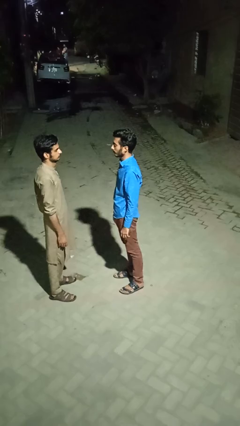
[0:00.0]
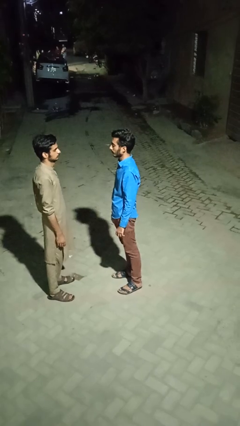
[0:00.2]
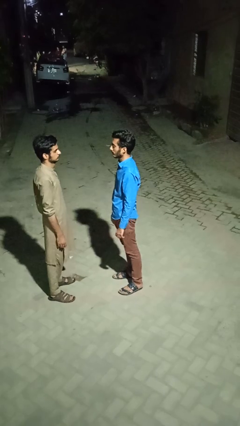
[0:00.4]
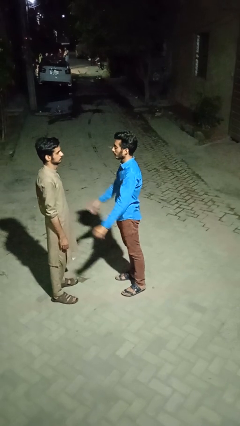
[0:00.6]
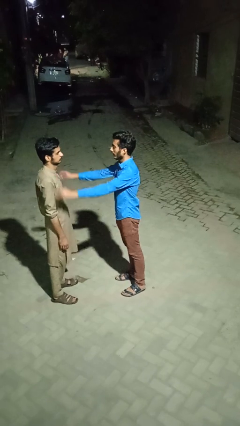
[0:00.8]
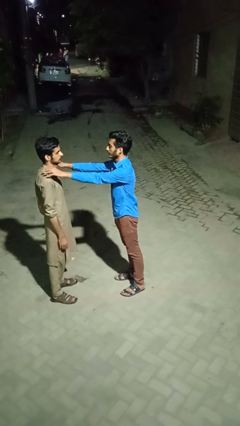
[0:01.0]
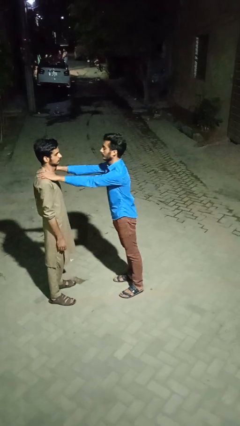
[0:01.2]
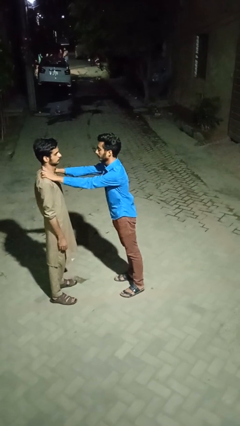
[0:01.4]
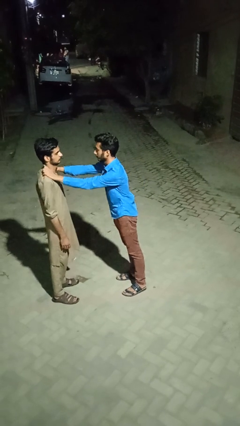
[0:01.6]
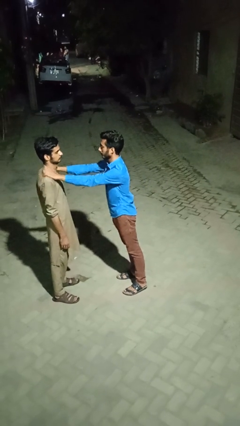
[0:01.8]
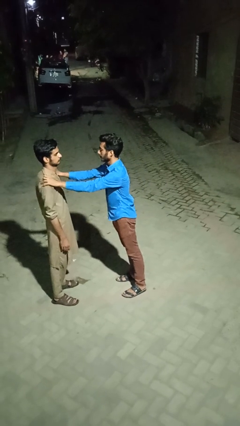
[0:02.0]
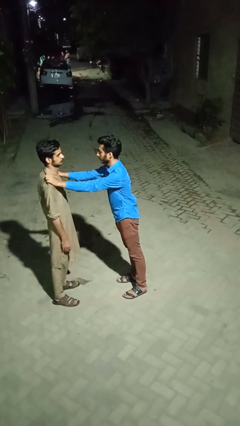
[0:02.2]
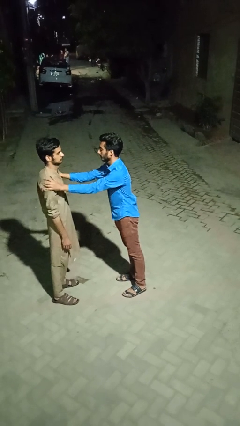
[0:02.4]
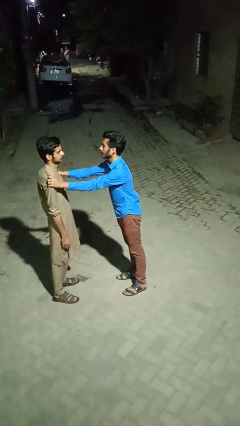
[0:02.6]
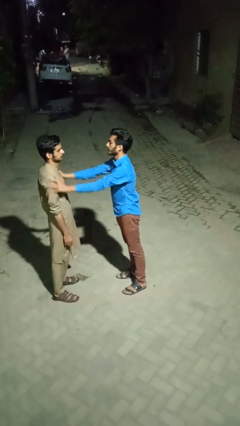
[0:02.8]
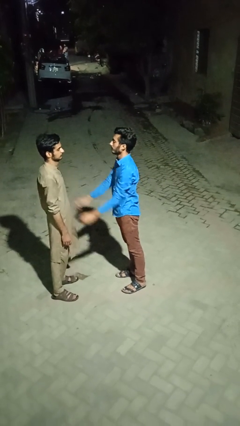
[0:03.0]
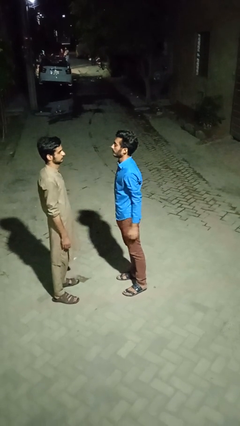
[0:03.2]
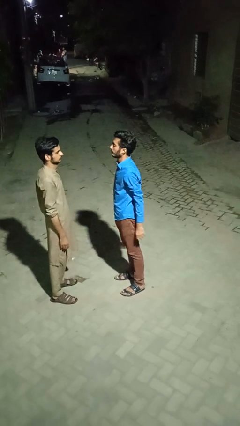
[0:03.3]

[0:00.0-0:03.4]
person pounds shoulders of person

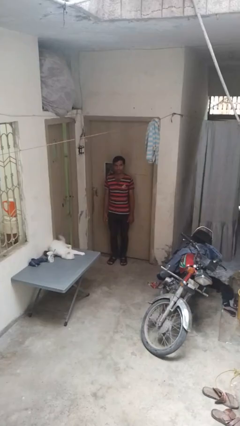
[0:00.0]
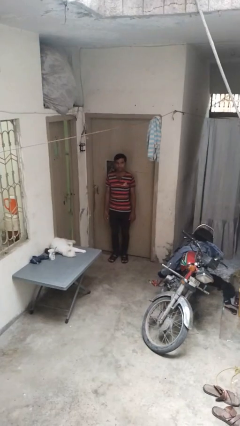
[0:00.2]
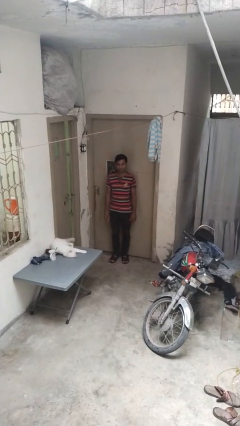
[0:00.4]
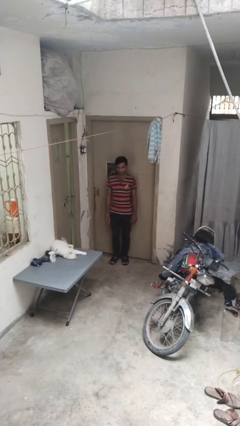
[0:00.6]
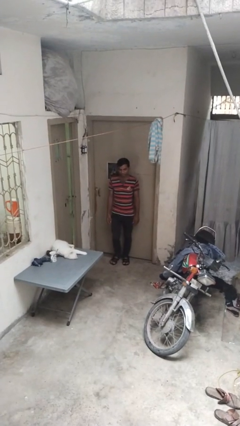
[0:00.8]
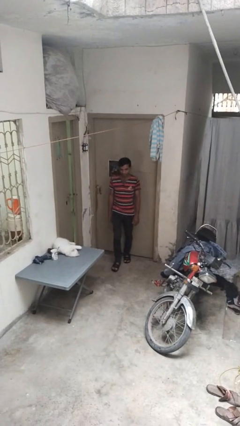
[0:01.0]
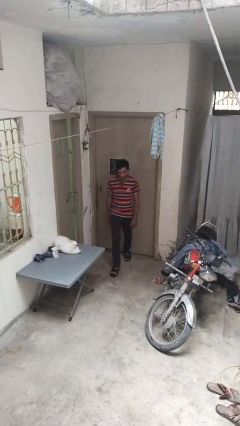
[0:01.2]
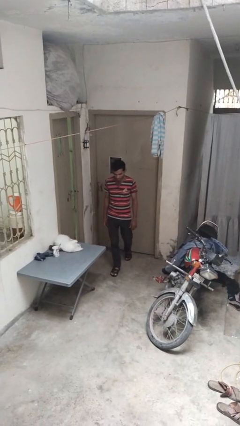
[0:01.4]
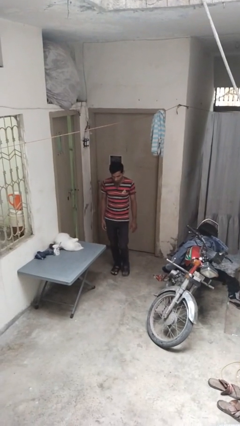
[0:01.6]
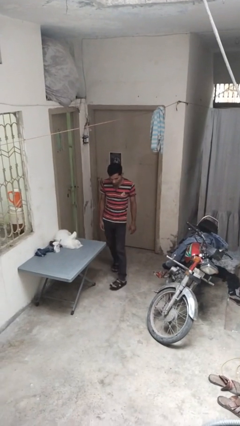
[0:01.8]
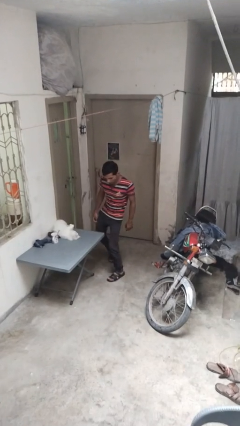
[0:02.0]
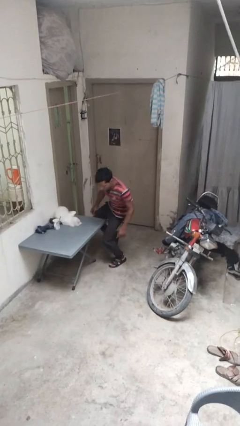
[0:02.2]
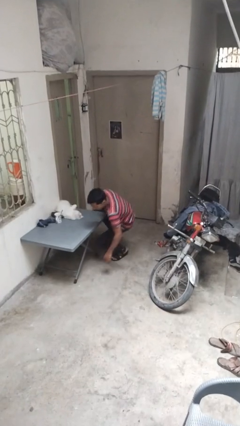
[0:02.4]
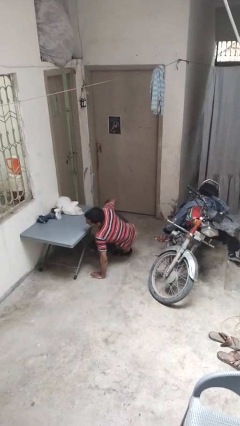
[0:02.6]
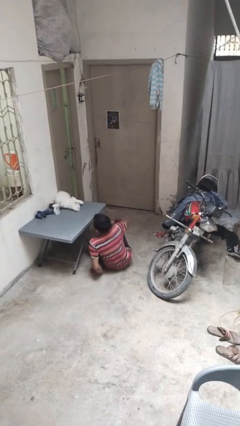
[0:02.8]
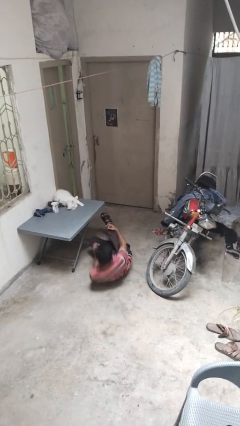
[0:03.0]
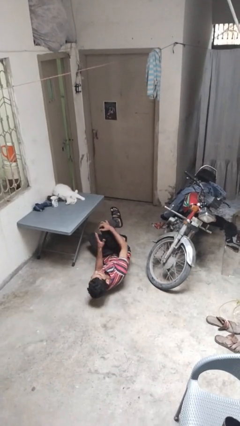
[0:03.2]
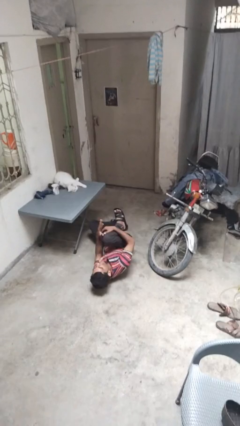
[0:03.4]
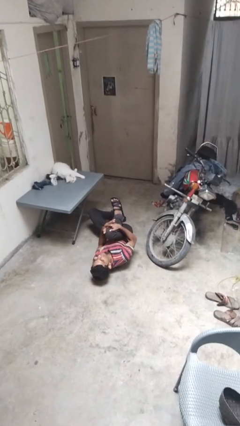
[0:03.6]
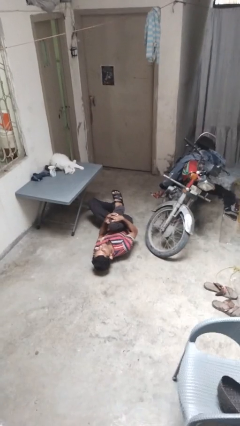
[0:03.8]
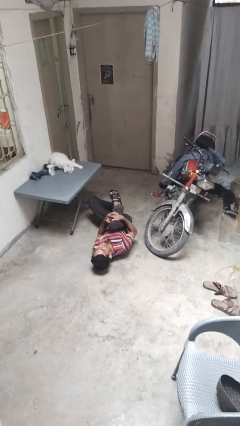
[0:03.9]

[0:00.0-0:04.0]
person trips on object on floor

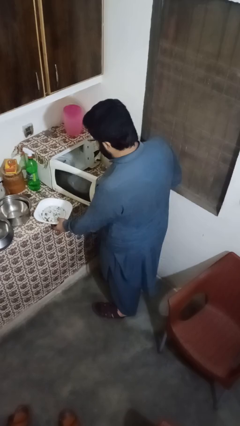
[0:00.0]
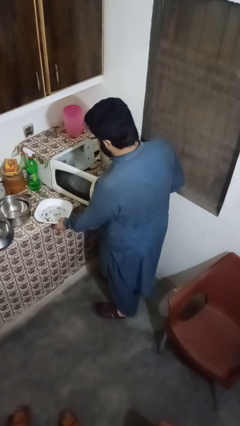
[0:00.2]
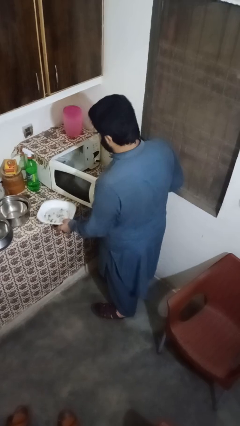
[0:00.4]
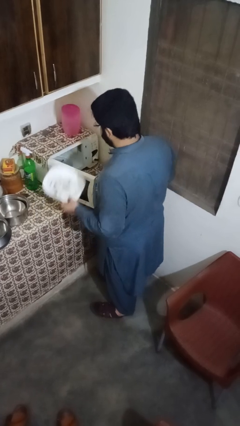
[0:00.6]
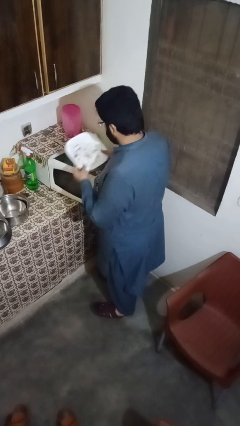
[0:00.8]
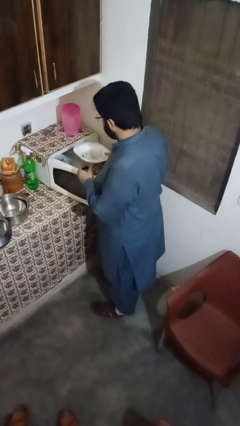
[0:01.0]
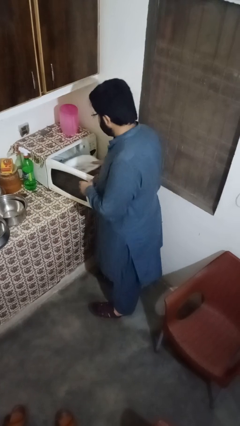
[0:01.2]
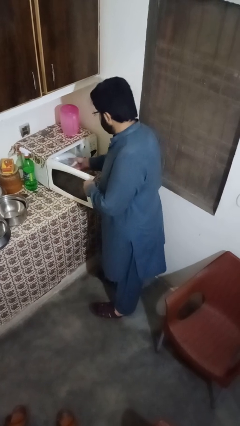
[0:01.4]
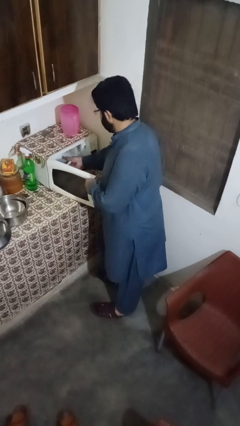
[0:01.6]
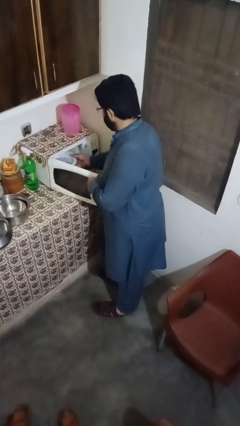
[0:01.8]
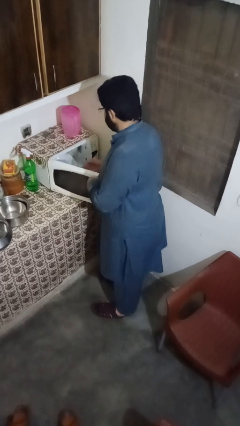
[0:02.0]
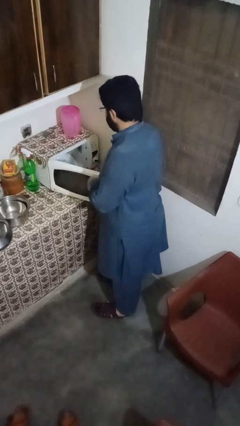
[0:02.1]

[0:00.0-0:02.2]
person puts object into microwave

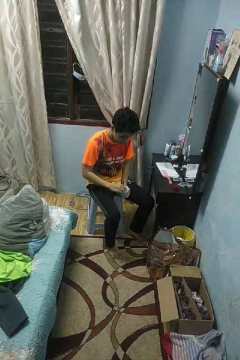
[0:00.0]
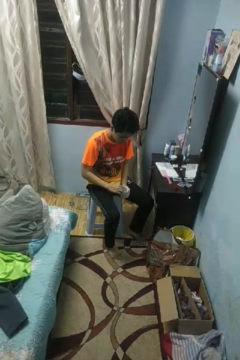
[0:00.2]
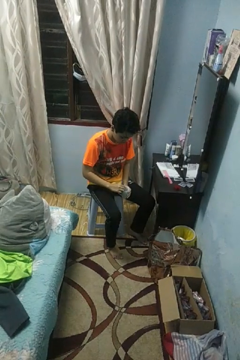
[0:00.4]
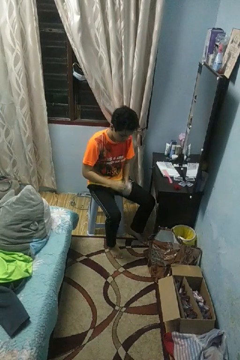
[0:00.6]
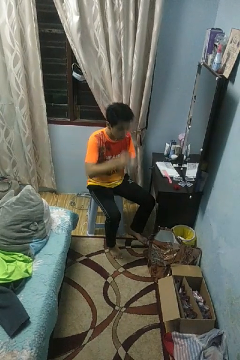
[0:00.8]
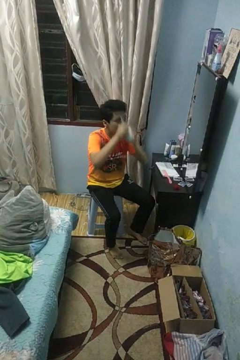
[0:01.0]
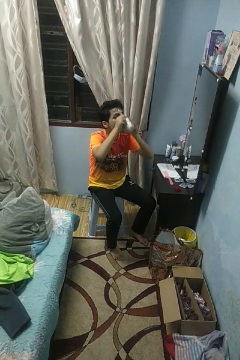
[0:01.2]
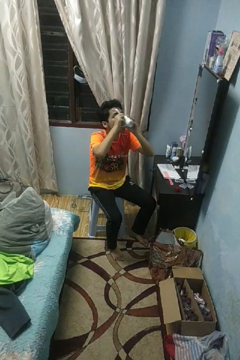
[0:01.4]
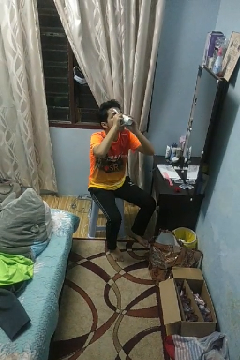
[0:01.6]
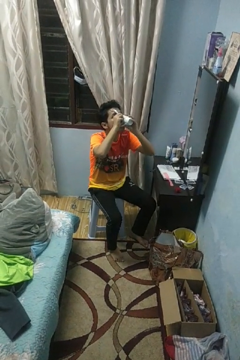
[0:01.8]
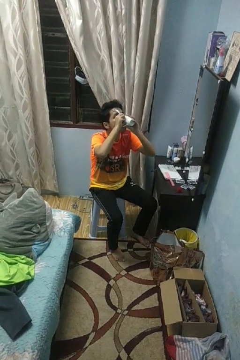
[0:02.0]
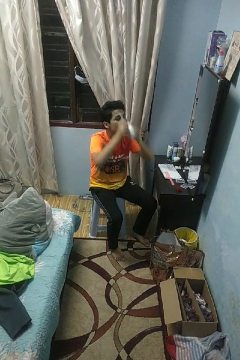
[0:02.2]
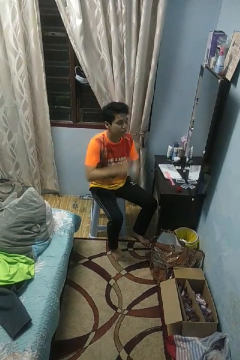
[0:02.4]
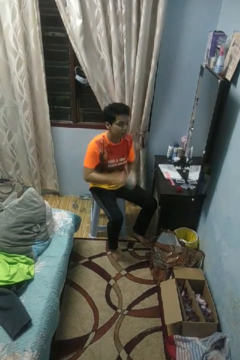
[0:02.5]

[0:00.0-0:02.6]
person drinks from mug

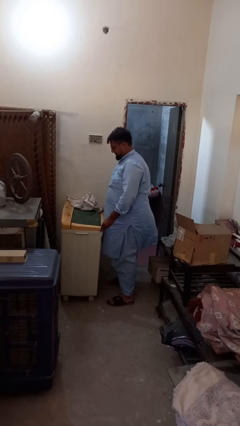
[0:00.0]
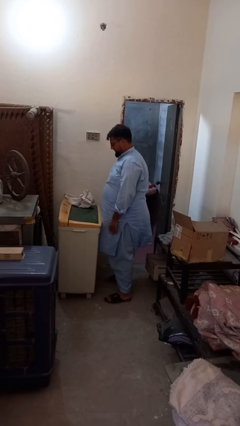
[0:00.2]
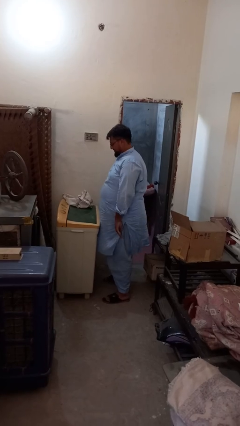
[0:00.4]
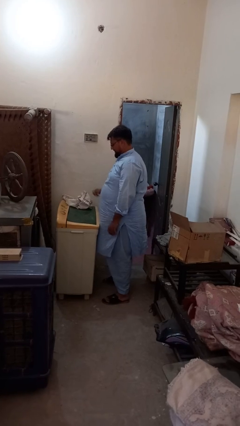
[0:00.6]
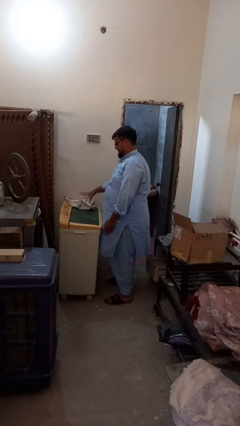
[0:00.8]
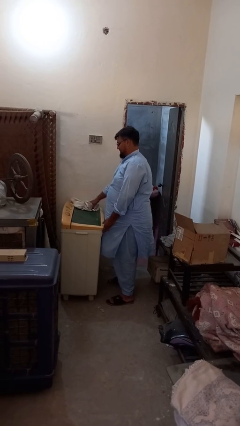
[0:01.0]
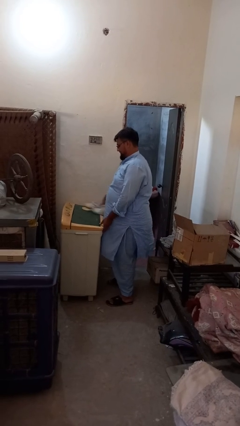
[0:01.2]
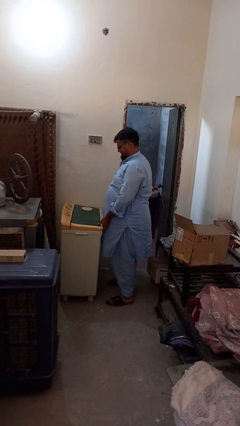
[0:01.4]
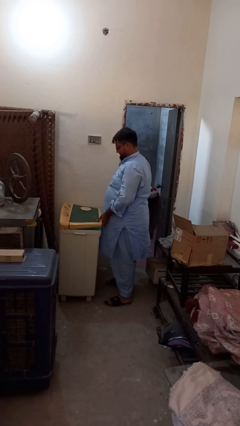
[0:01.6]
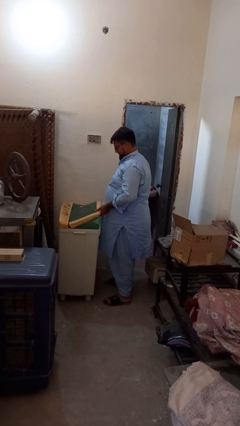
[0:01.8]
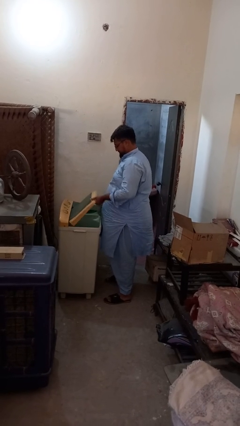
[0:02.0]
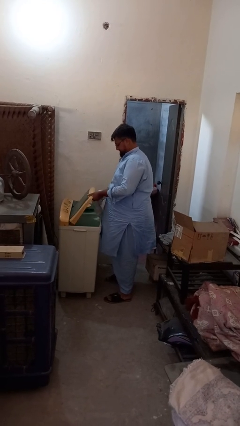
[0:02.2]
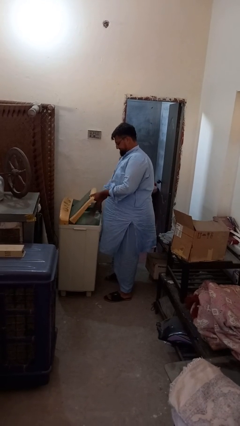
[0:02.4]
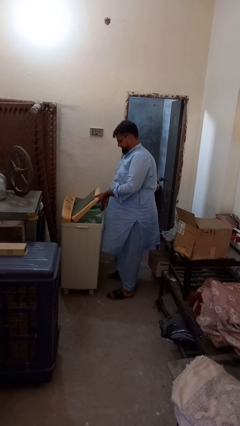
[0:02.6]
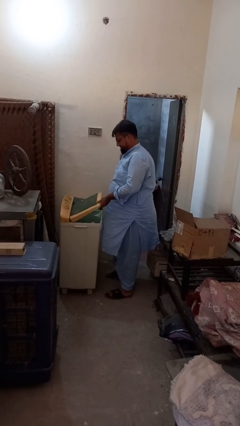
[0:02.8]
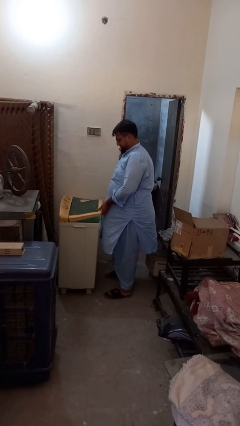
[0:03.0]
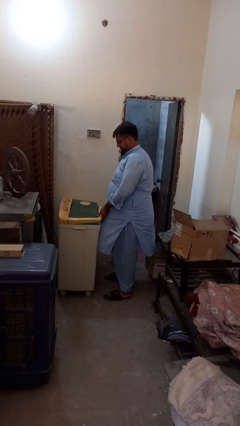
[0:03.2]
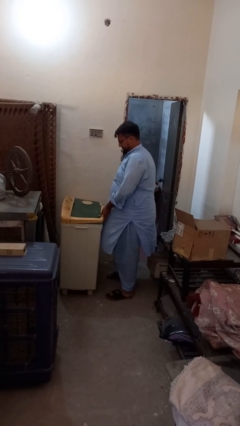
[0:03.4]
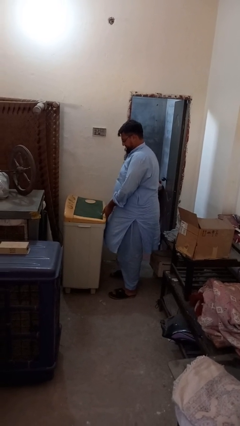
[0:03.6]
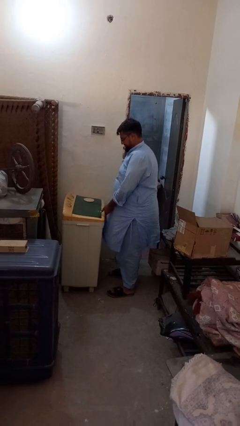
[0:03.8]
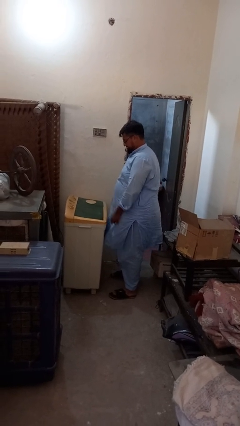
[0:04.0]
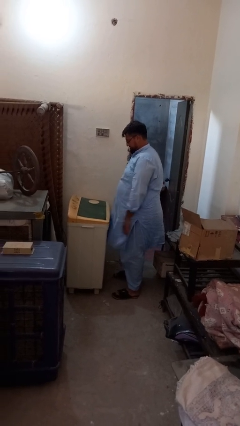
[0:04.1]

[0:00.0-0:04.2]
person loads clotheswasher

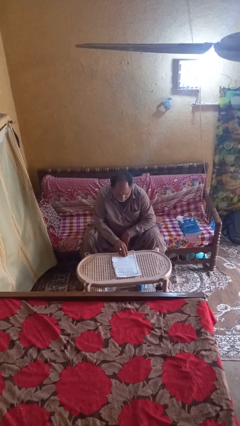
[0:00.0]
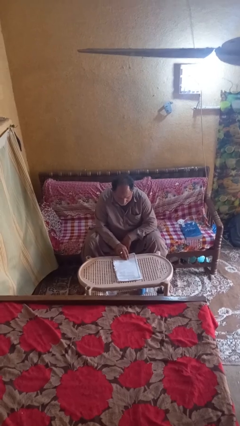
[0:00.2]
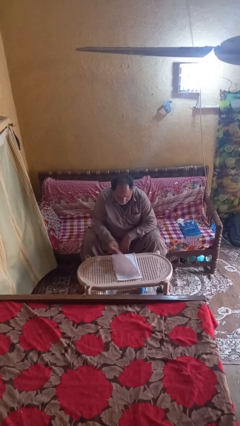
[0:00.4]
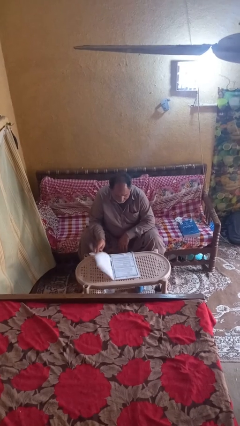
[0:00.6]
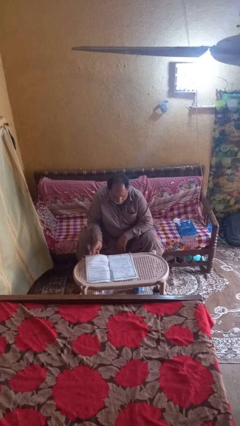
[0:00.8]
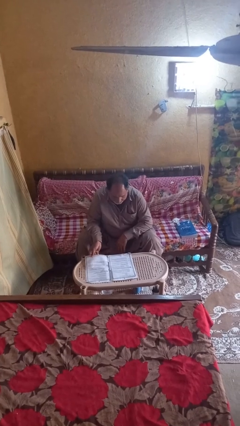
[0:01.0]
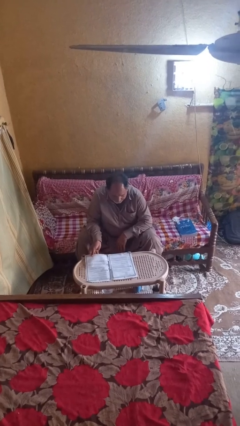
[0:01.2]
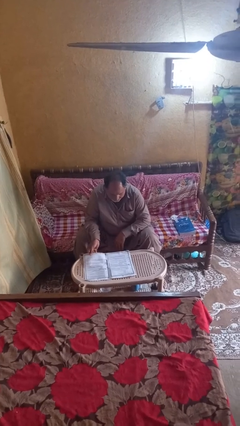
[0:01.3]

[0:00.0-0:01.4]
person reads newspaper
